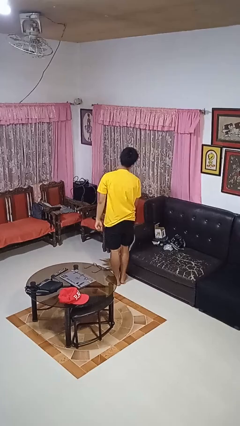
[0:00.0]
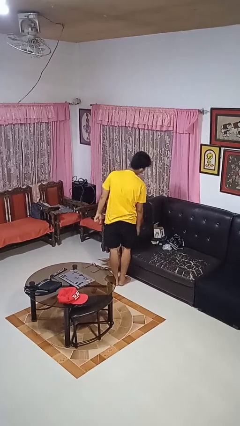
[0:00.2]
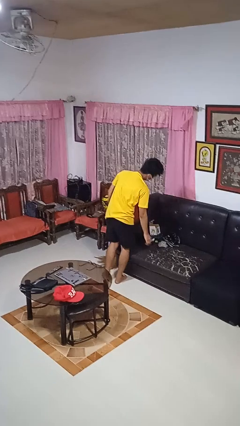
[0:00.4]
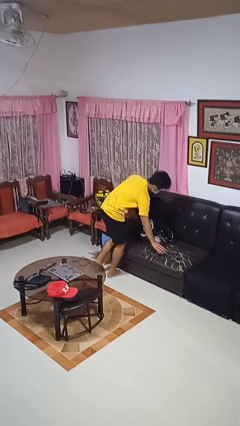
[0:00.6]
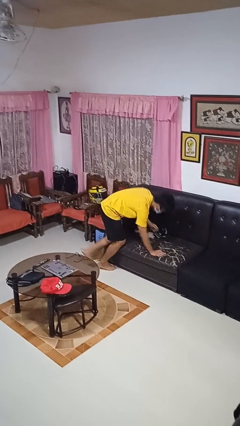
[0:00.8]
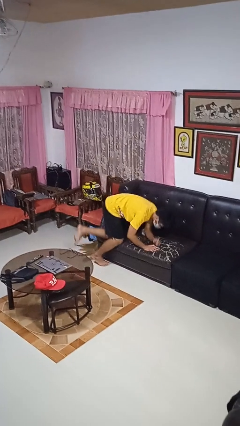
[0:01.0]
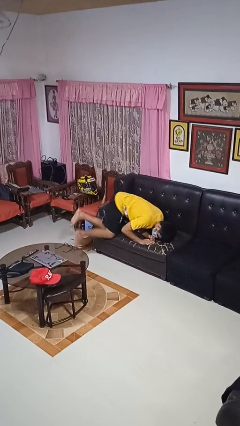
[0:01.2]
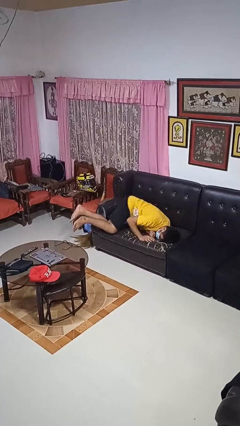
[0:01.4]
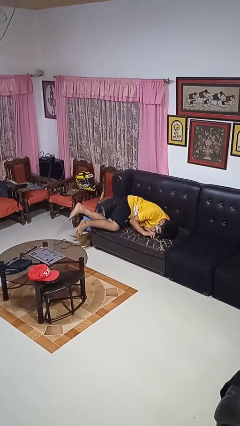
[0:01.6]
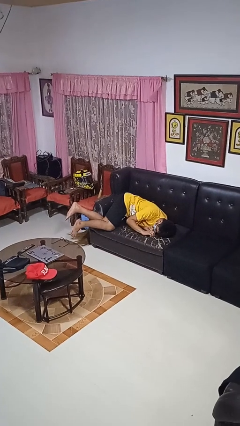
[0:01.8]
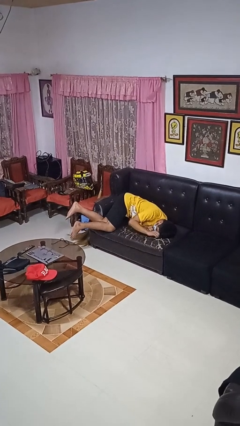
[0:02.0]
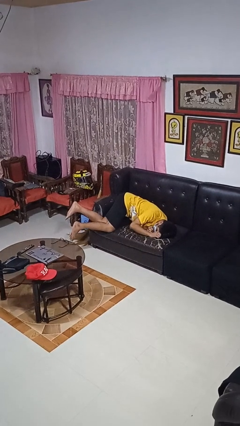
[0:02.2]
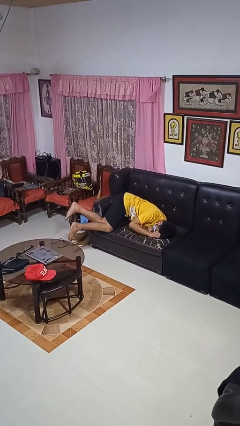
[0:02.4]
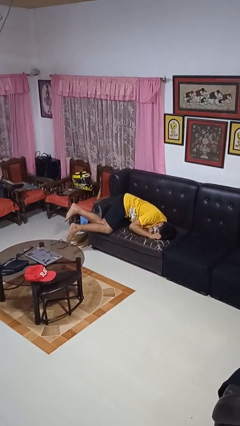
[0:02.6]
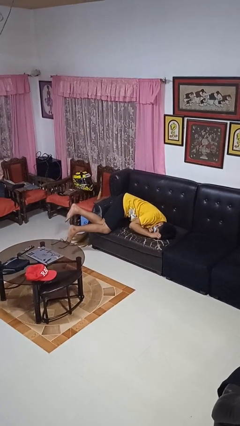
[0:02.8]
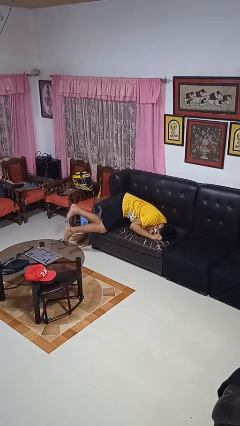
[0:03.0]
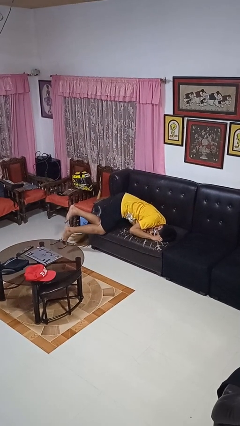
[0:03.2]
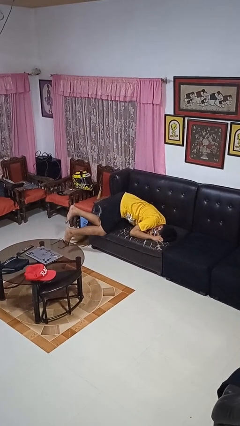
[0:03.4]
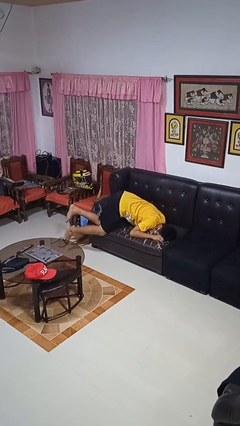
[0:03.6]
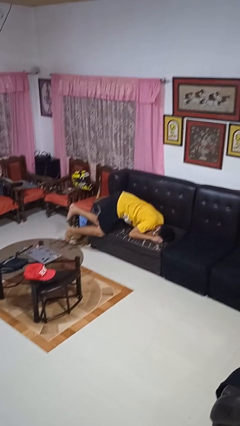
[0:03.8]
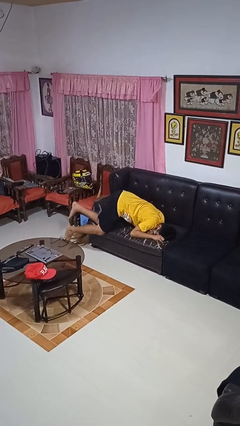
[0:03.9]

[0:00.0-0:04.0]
person lies down on couch

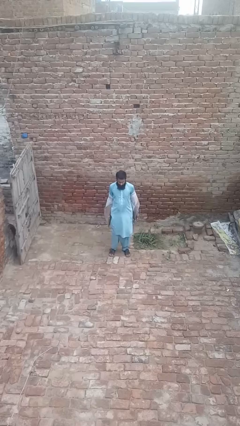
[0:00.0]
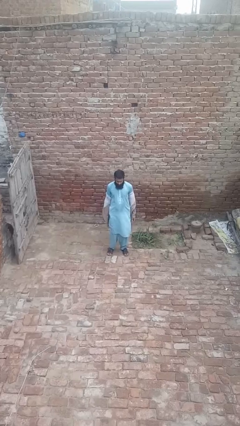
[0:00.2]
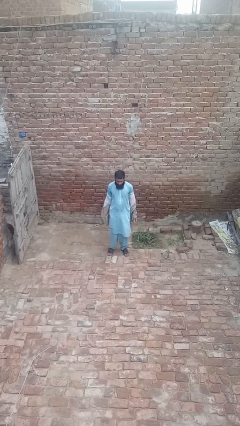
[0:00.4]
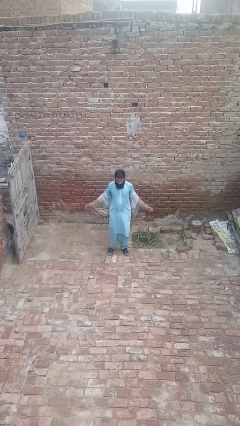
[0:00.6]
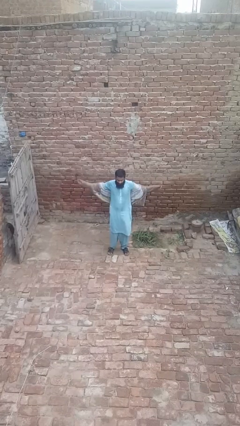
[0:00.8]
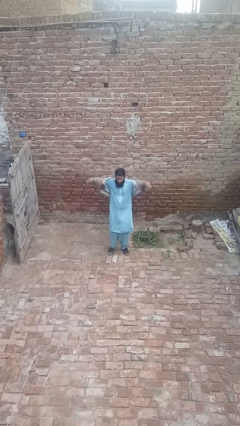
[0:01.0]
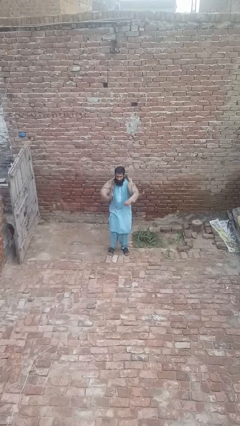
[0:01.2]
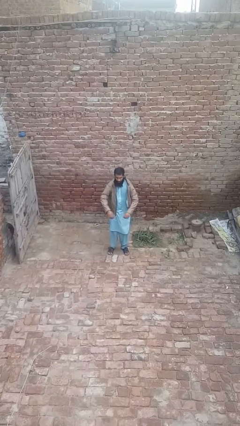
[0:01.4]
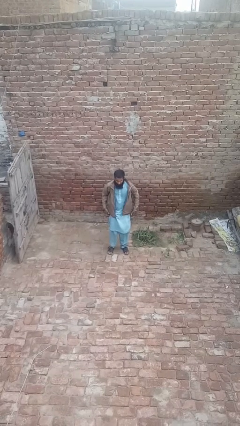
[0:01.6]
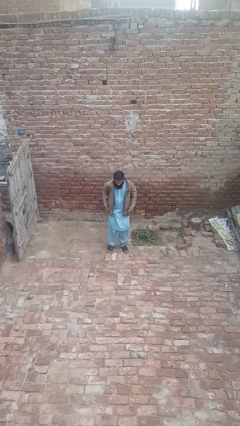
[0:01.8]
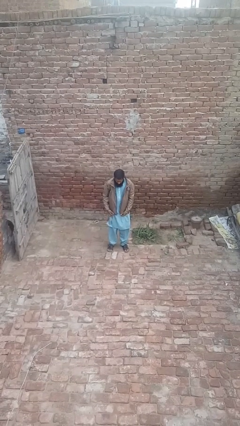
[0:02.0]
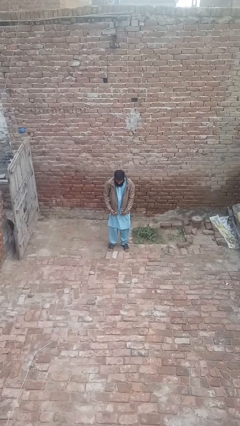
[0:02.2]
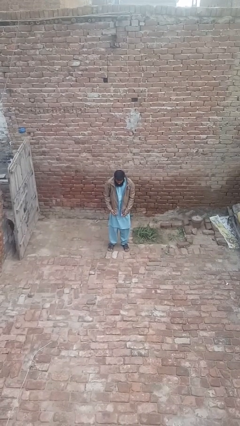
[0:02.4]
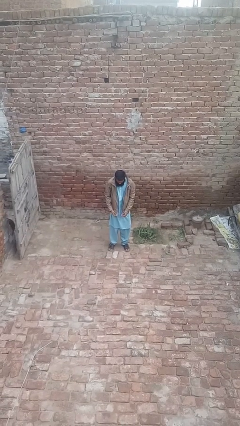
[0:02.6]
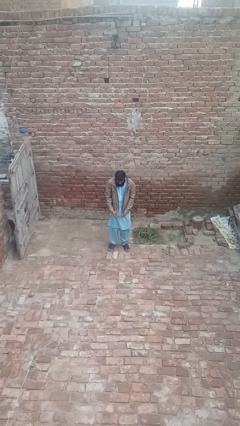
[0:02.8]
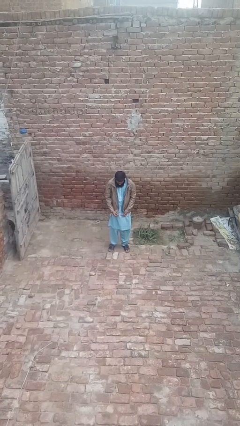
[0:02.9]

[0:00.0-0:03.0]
person puts on jacket

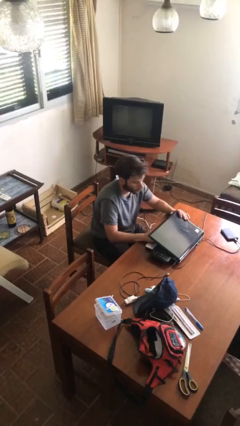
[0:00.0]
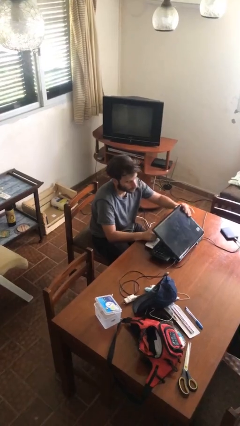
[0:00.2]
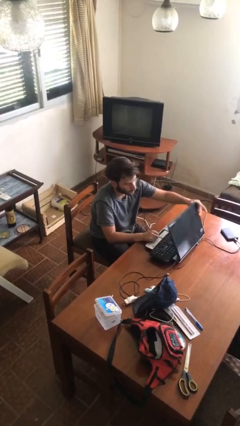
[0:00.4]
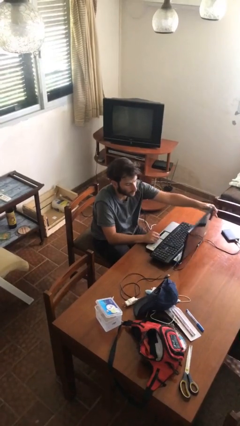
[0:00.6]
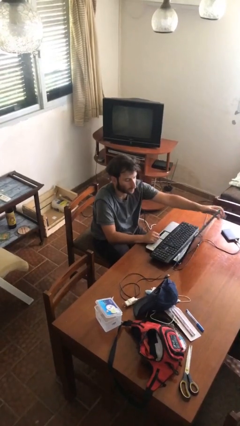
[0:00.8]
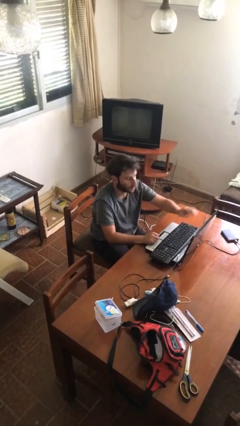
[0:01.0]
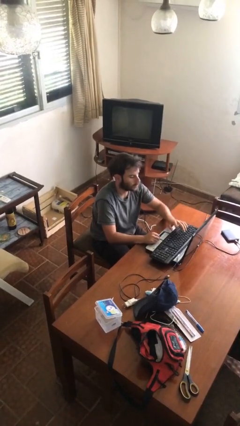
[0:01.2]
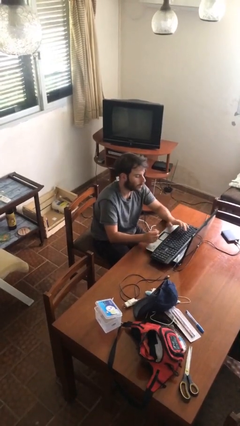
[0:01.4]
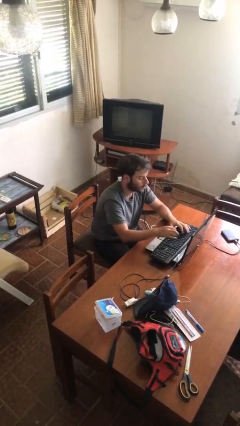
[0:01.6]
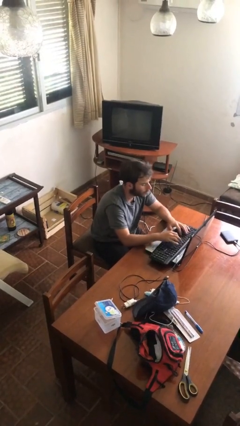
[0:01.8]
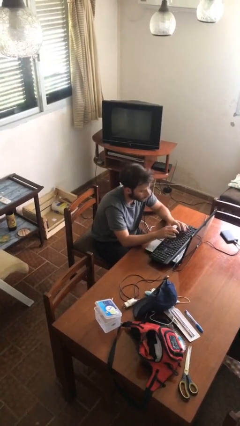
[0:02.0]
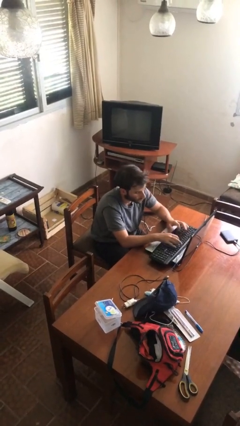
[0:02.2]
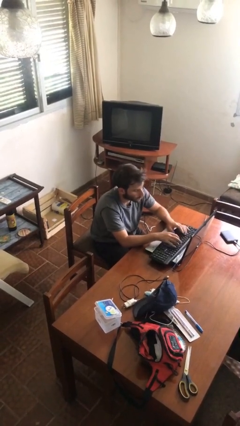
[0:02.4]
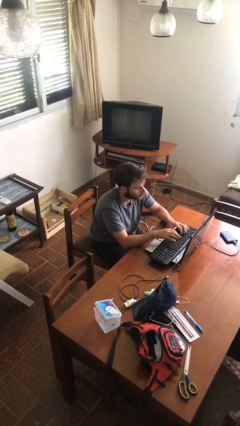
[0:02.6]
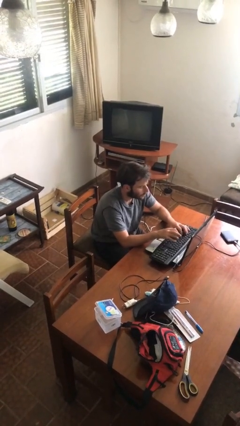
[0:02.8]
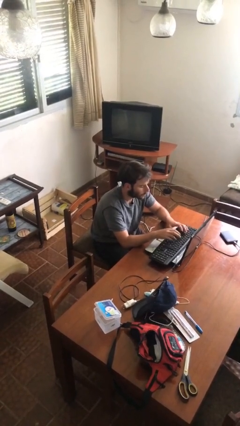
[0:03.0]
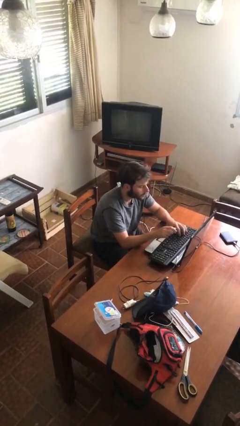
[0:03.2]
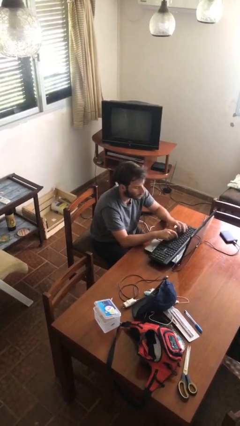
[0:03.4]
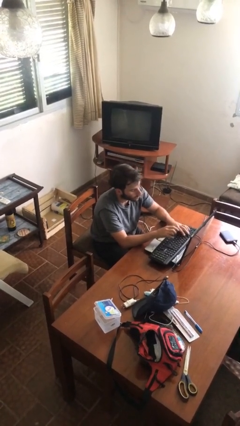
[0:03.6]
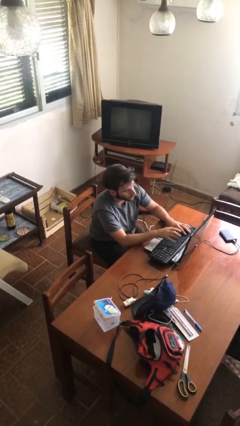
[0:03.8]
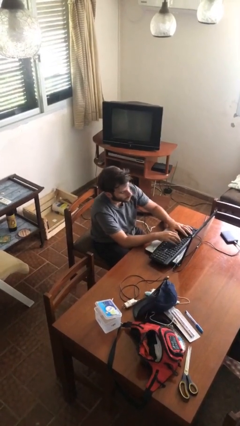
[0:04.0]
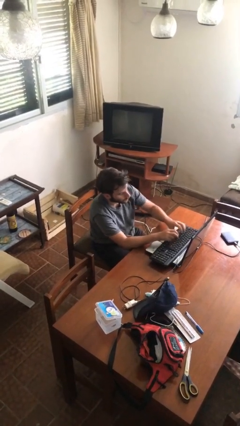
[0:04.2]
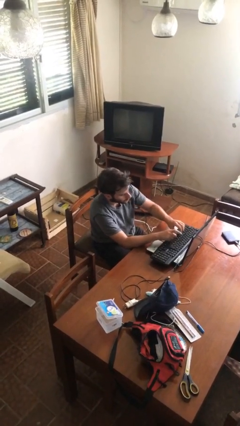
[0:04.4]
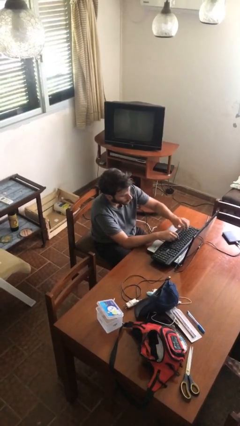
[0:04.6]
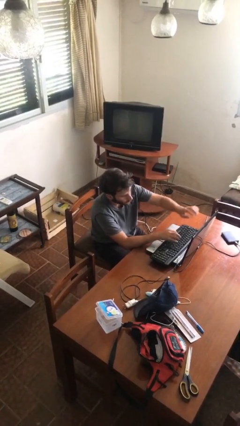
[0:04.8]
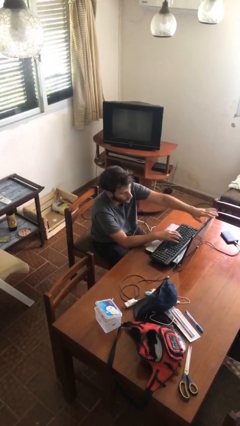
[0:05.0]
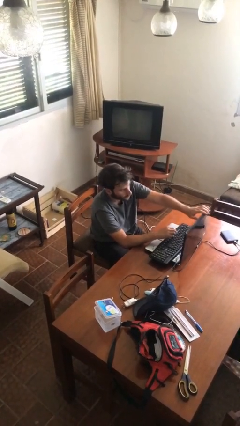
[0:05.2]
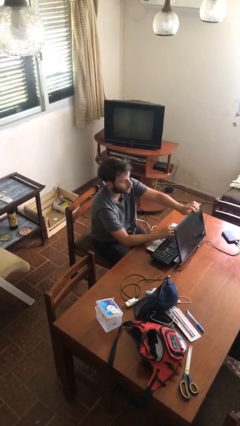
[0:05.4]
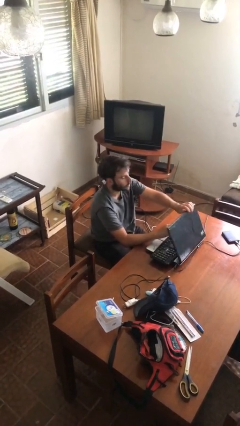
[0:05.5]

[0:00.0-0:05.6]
person interacts with laptop

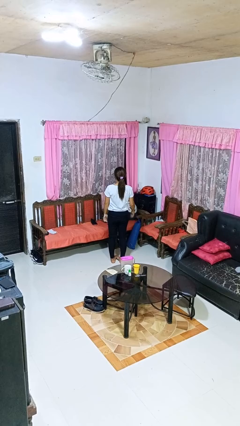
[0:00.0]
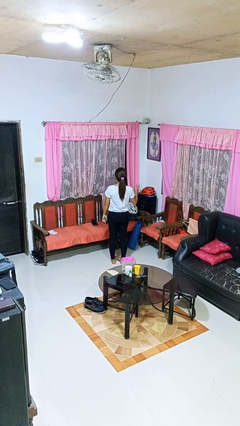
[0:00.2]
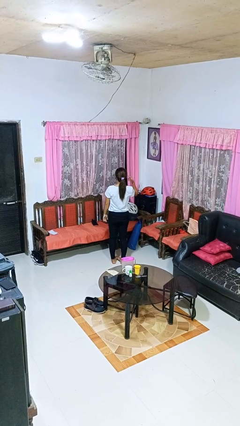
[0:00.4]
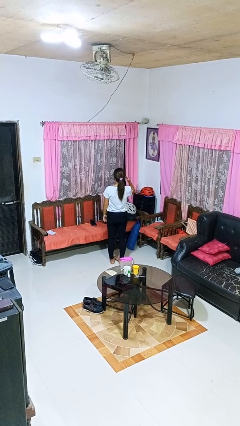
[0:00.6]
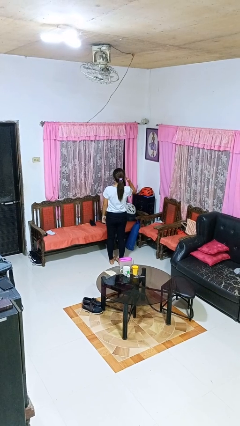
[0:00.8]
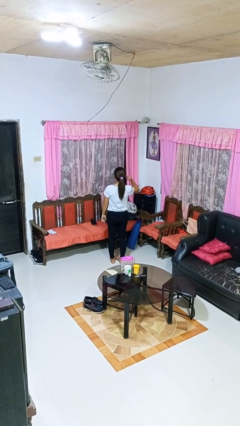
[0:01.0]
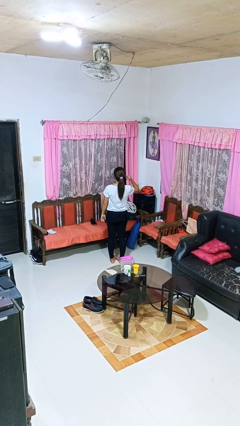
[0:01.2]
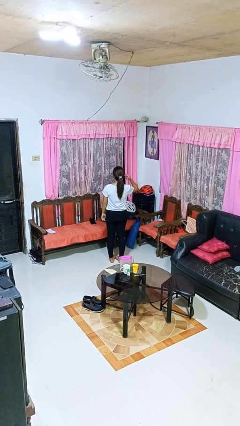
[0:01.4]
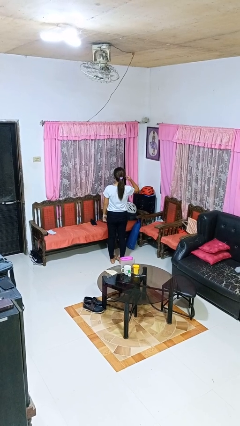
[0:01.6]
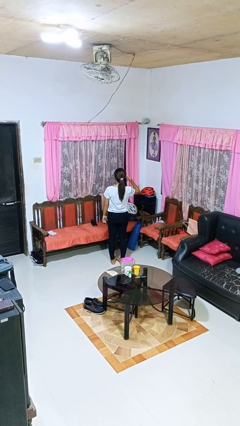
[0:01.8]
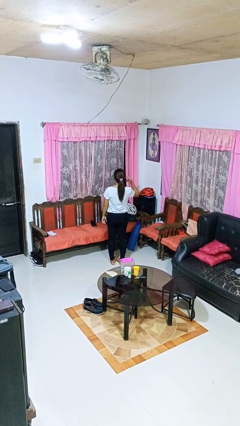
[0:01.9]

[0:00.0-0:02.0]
person gestures listen closely

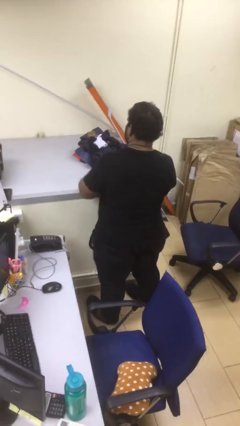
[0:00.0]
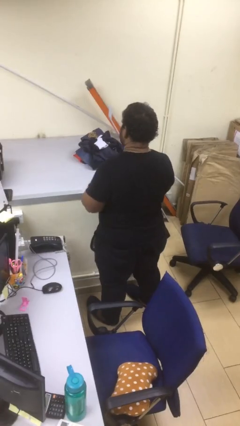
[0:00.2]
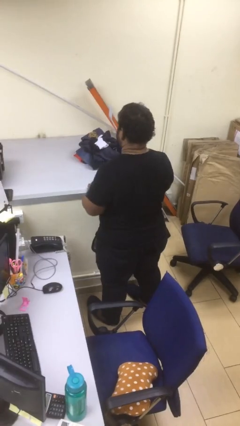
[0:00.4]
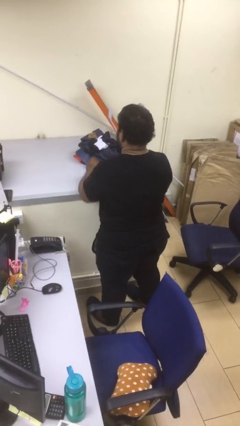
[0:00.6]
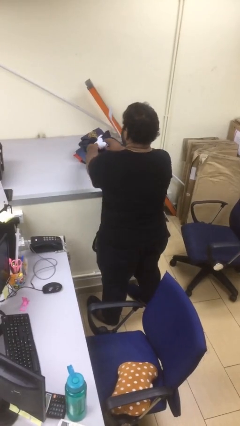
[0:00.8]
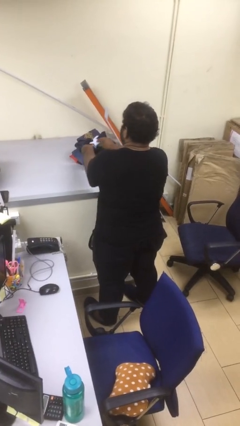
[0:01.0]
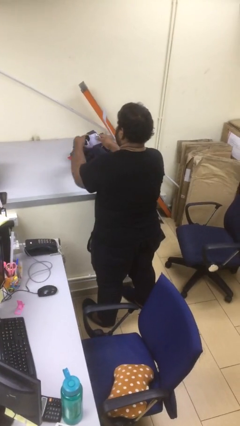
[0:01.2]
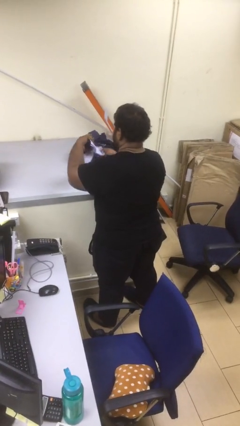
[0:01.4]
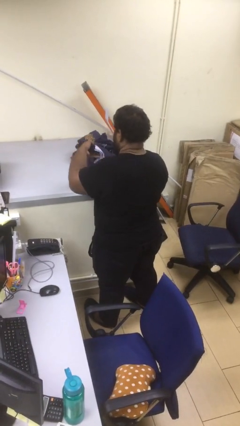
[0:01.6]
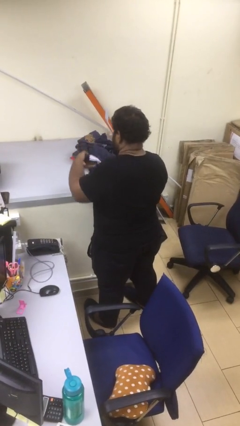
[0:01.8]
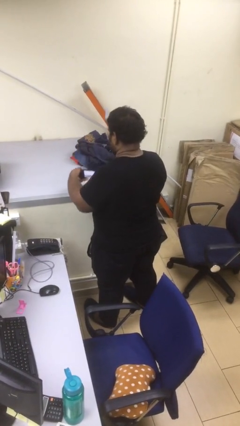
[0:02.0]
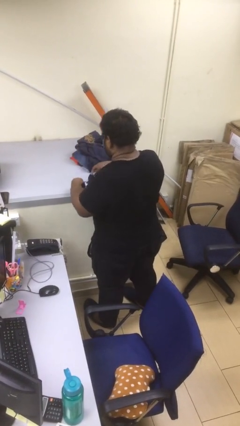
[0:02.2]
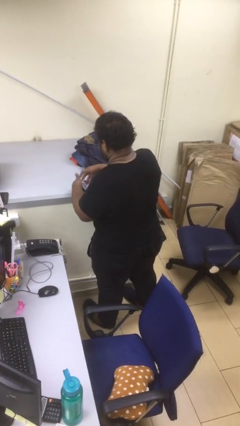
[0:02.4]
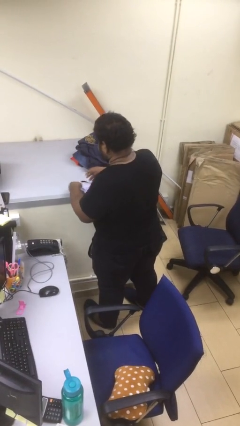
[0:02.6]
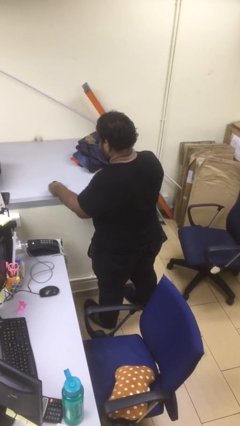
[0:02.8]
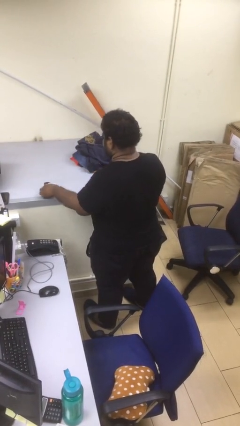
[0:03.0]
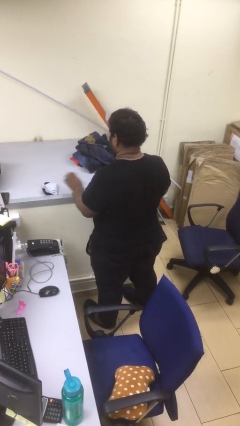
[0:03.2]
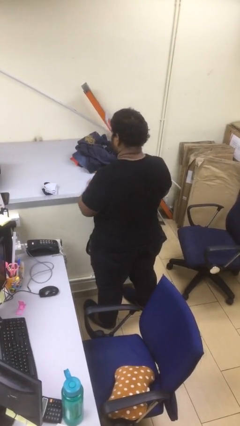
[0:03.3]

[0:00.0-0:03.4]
person folds socks
